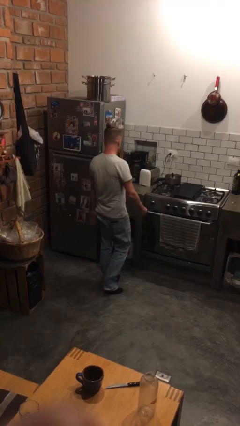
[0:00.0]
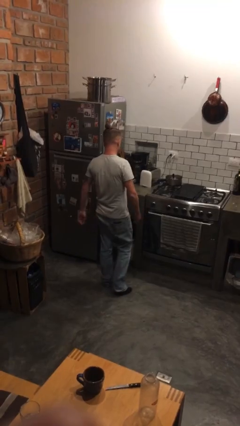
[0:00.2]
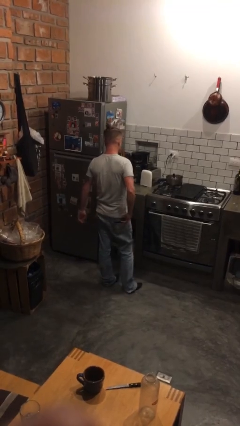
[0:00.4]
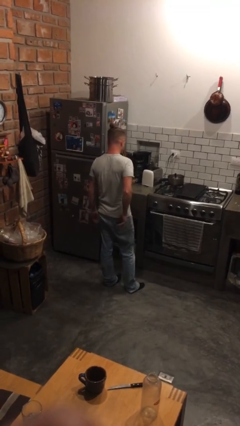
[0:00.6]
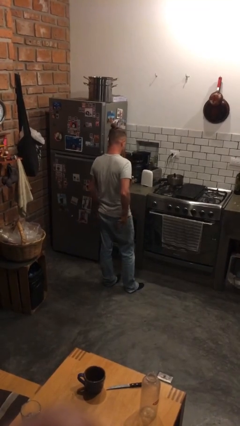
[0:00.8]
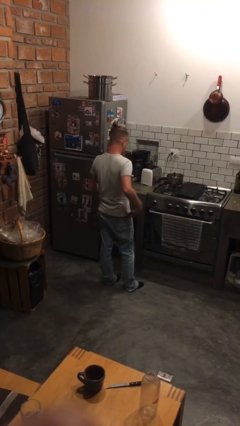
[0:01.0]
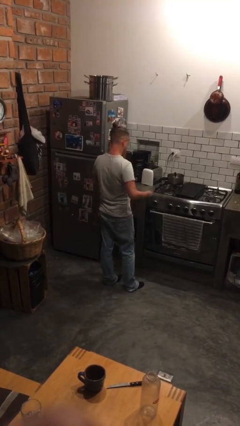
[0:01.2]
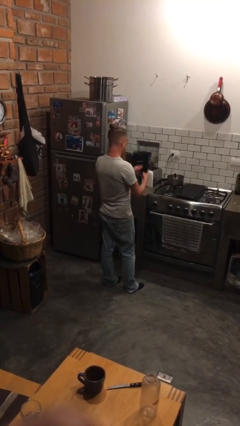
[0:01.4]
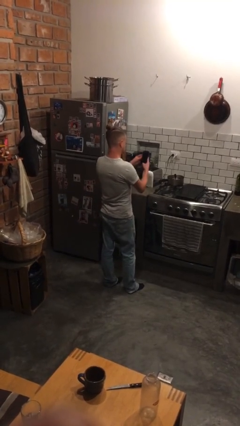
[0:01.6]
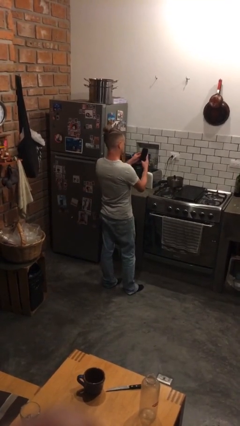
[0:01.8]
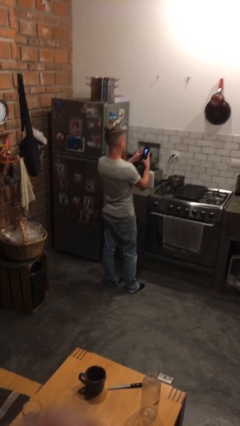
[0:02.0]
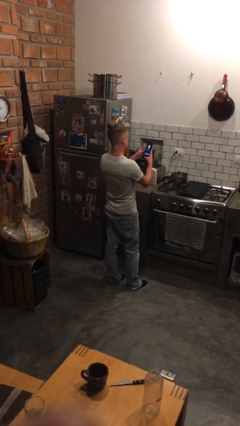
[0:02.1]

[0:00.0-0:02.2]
person takes phone from pocket

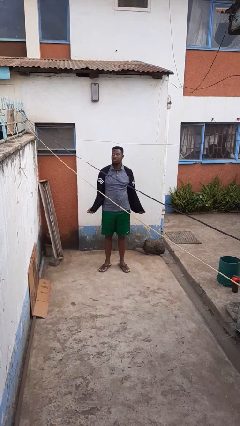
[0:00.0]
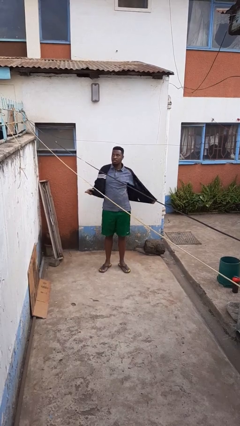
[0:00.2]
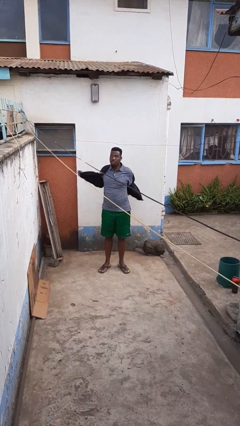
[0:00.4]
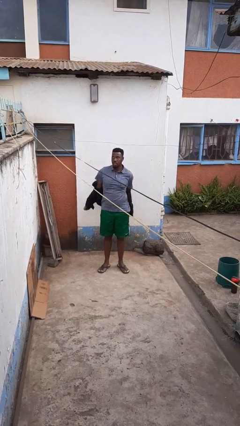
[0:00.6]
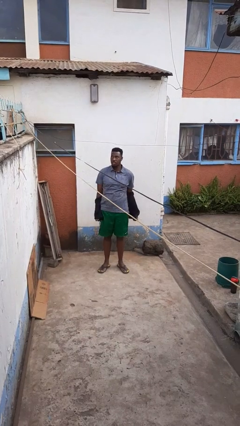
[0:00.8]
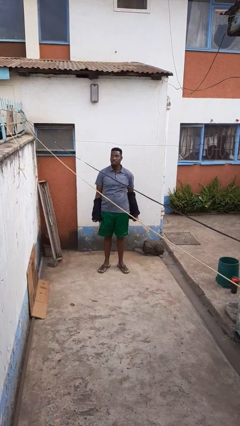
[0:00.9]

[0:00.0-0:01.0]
person takes off jacket

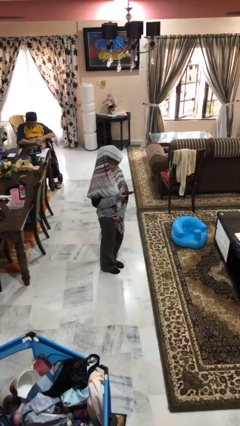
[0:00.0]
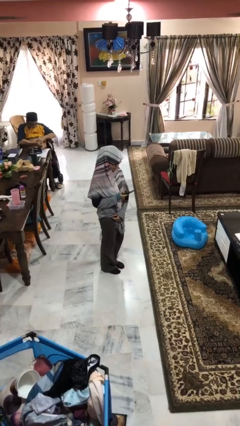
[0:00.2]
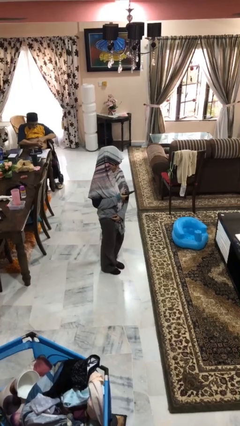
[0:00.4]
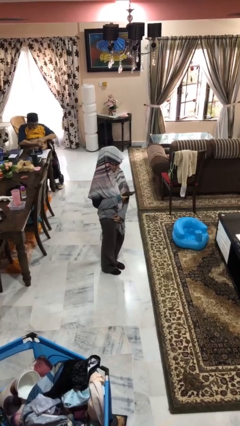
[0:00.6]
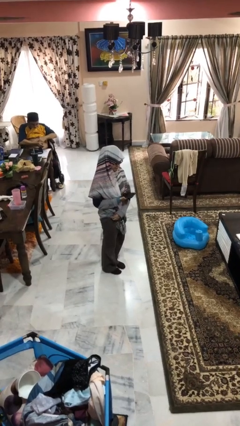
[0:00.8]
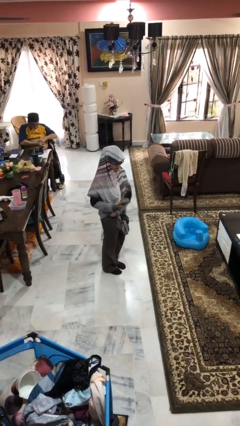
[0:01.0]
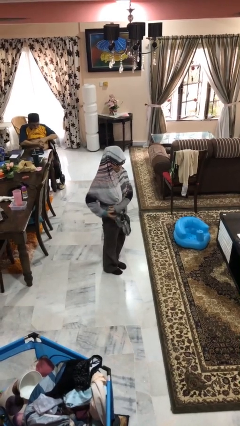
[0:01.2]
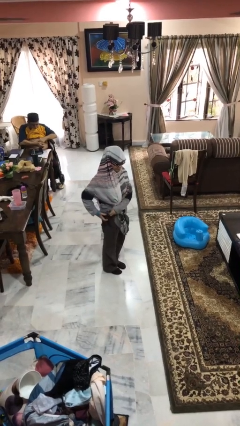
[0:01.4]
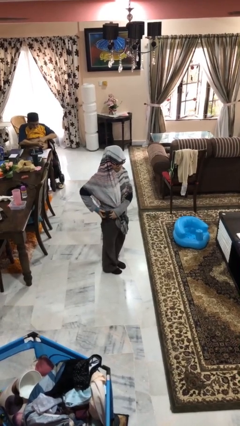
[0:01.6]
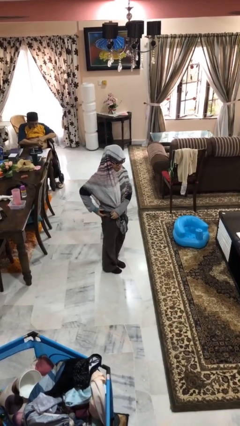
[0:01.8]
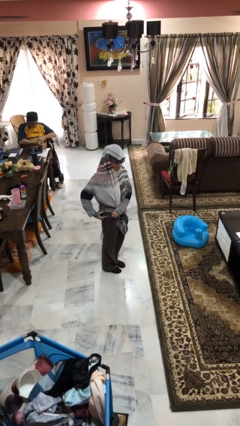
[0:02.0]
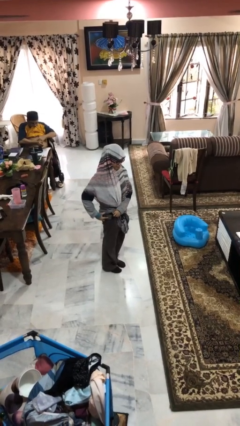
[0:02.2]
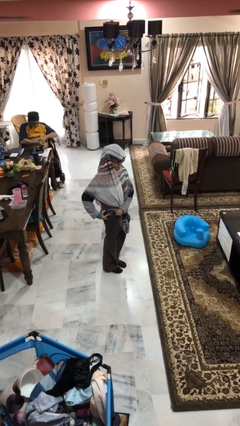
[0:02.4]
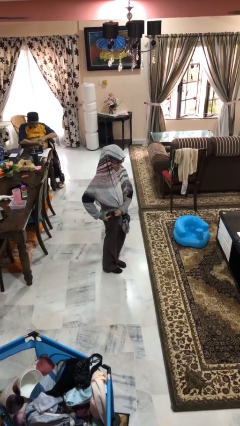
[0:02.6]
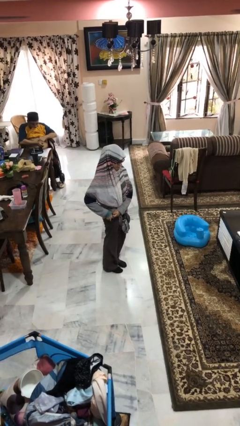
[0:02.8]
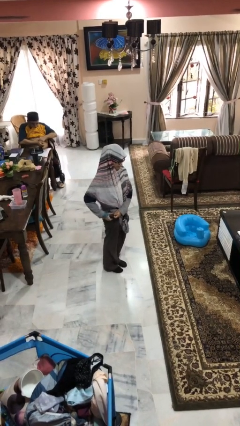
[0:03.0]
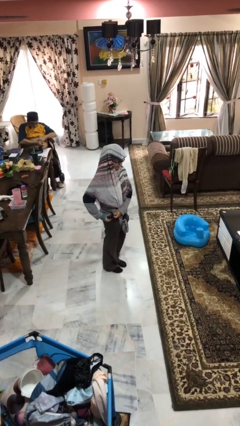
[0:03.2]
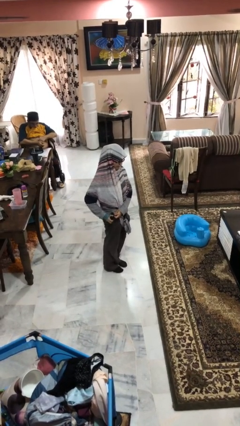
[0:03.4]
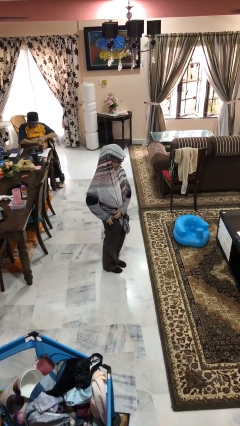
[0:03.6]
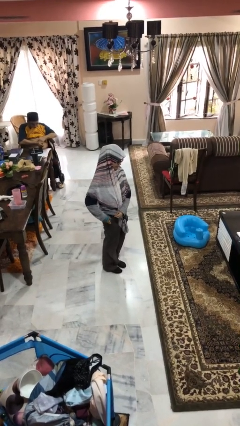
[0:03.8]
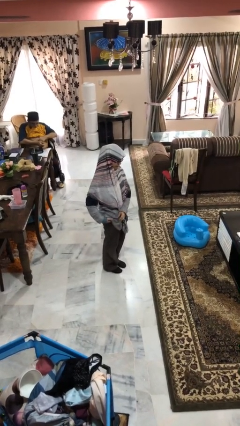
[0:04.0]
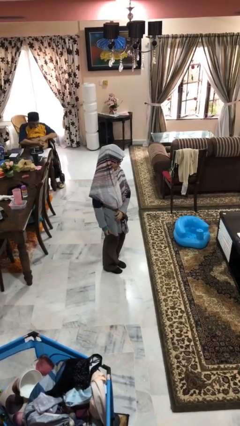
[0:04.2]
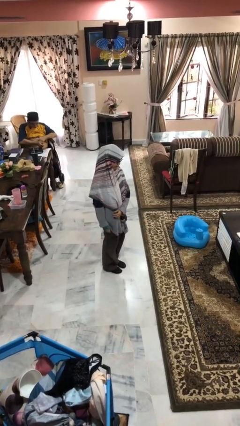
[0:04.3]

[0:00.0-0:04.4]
person puts phone into pocket

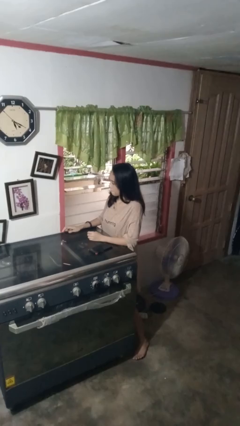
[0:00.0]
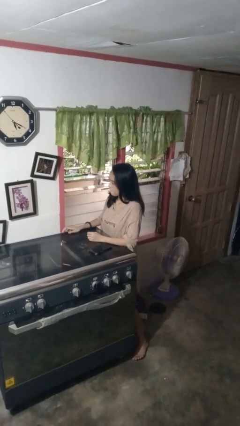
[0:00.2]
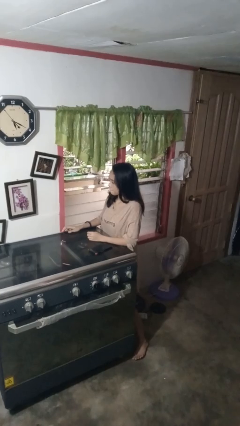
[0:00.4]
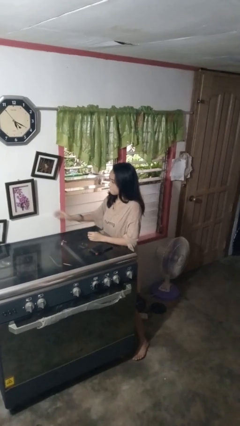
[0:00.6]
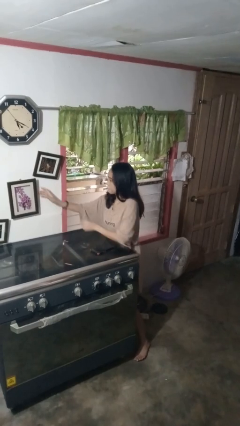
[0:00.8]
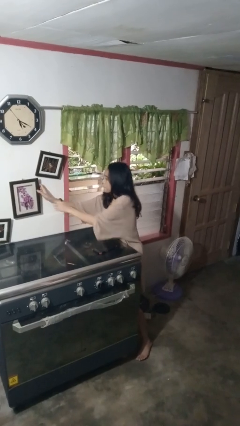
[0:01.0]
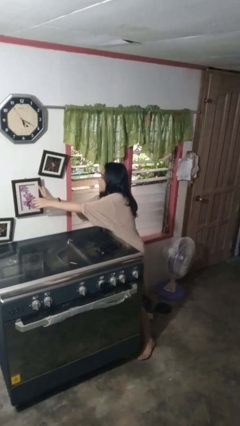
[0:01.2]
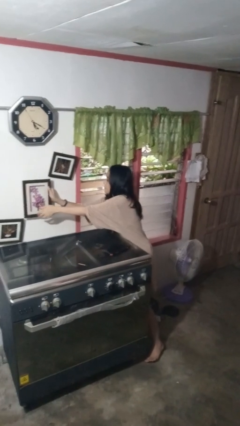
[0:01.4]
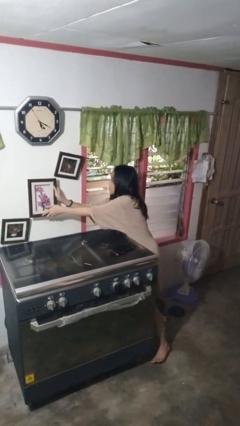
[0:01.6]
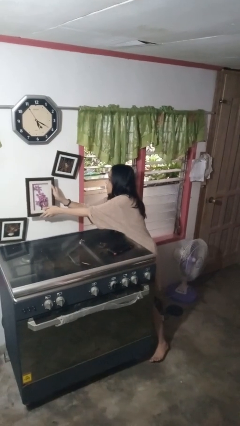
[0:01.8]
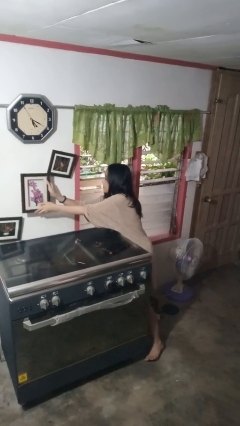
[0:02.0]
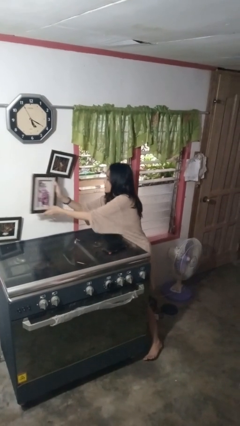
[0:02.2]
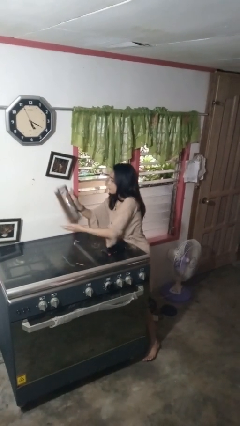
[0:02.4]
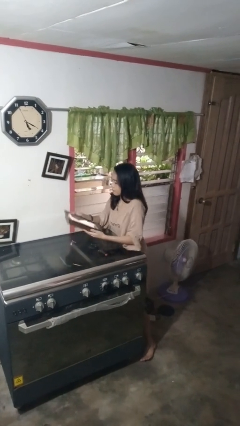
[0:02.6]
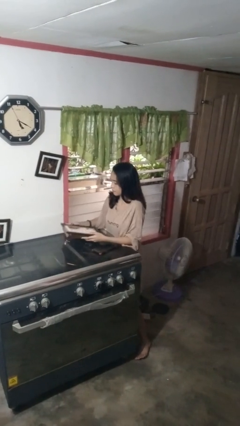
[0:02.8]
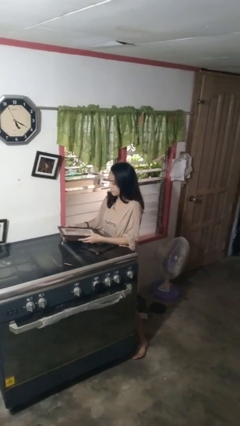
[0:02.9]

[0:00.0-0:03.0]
person takes down picture frame

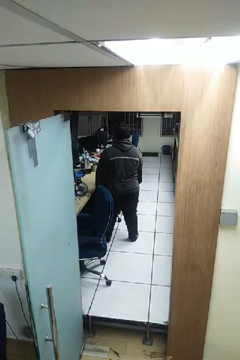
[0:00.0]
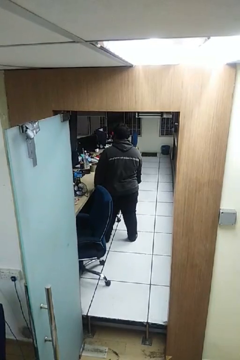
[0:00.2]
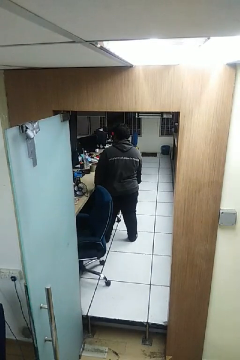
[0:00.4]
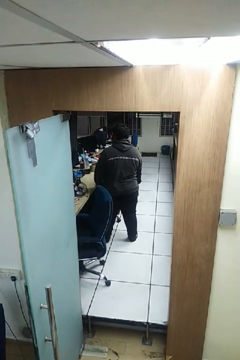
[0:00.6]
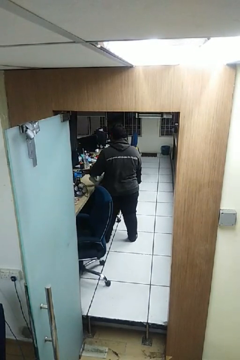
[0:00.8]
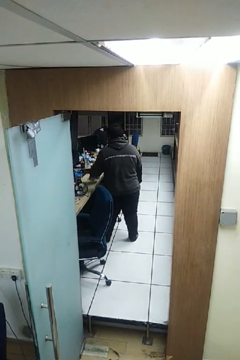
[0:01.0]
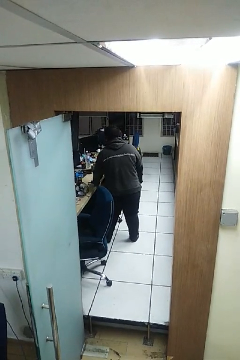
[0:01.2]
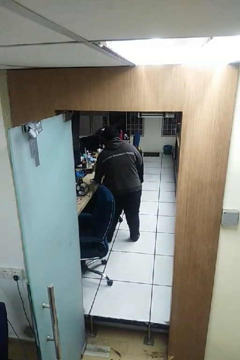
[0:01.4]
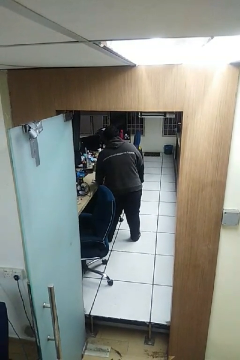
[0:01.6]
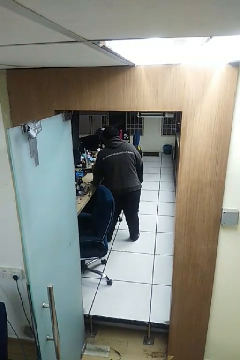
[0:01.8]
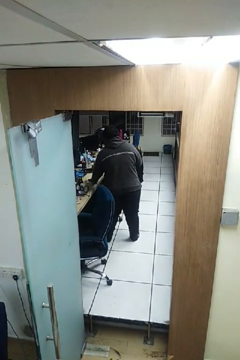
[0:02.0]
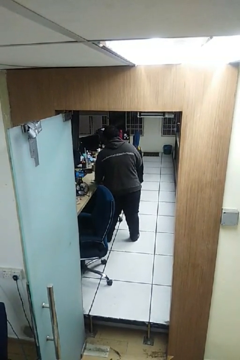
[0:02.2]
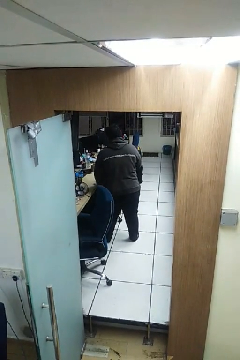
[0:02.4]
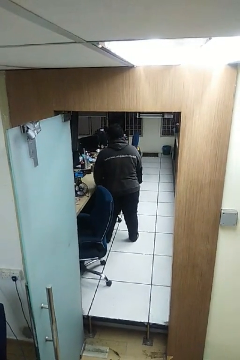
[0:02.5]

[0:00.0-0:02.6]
person cleans table with rag

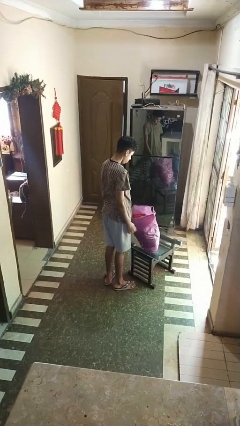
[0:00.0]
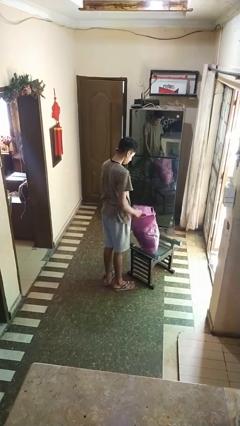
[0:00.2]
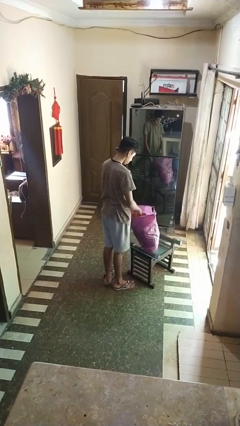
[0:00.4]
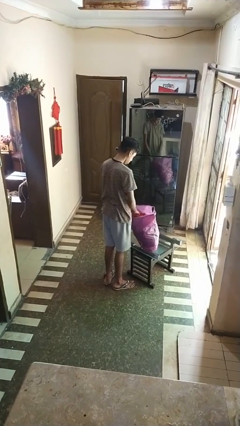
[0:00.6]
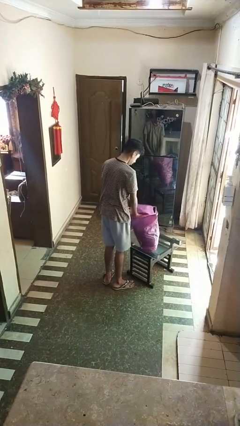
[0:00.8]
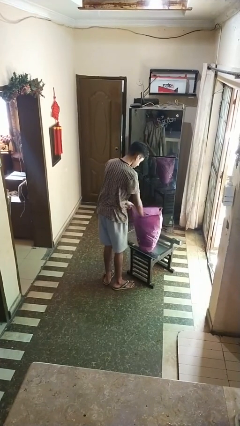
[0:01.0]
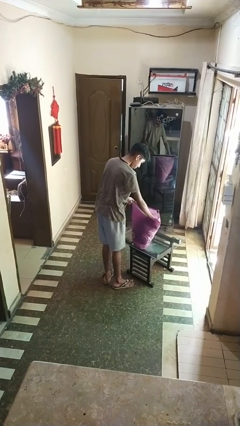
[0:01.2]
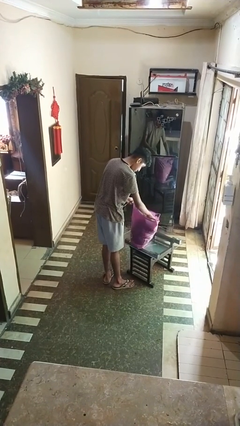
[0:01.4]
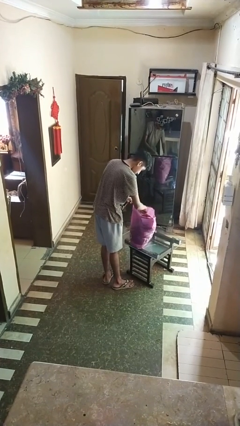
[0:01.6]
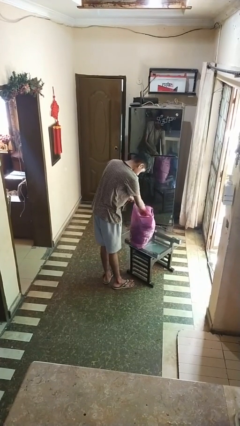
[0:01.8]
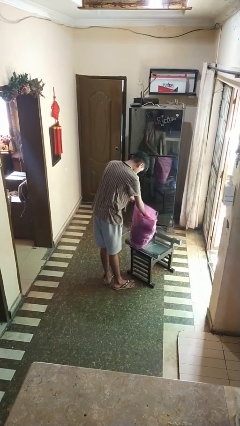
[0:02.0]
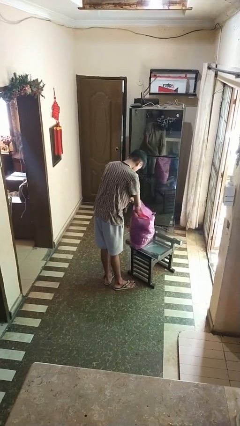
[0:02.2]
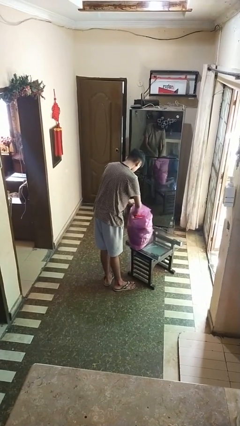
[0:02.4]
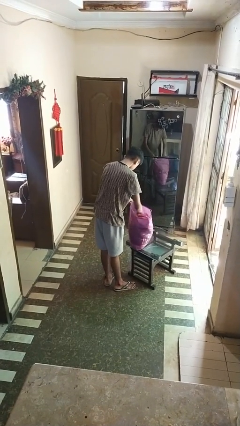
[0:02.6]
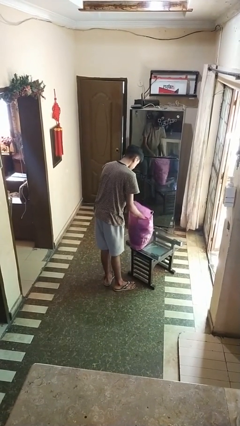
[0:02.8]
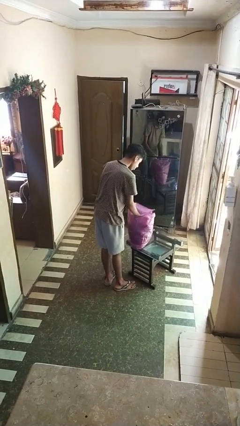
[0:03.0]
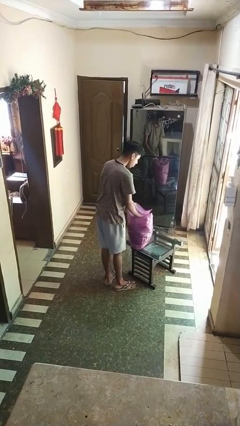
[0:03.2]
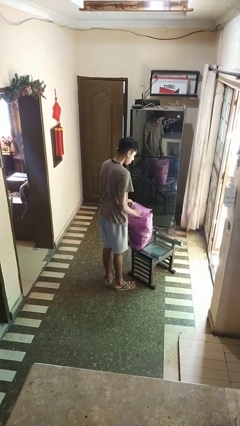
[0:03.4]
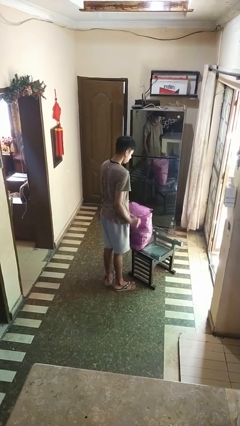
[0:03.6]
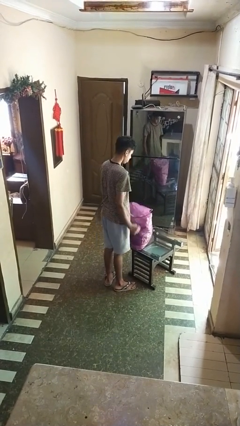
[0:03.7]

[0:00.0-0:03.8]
person searches in bag

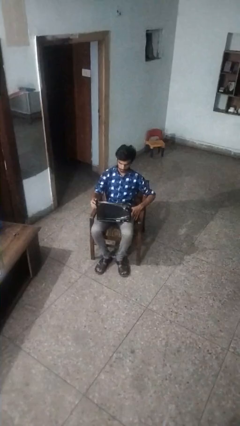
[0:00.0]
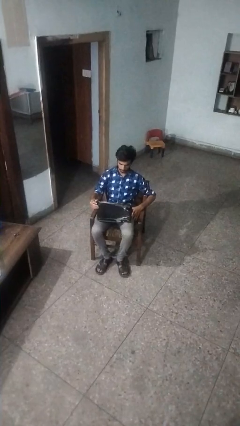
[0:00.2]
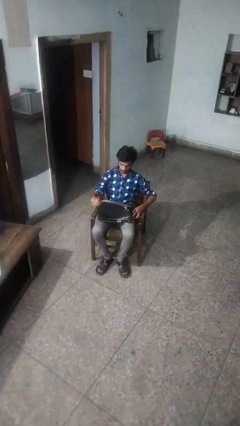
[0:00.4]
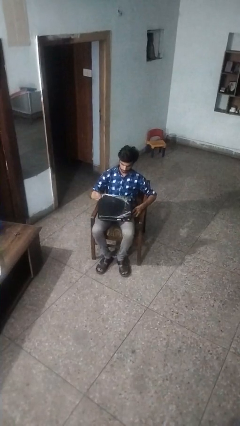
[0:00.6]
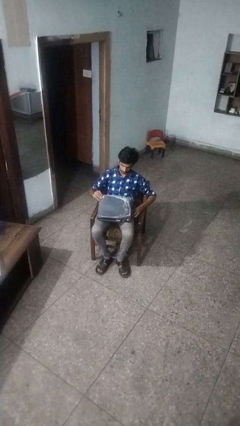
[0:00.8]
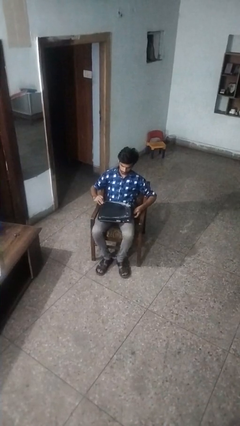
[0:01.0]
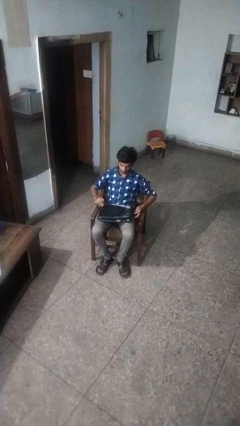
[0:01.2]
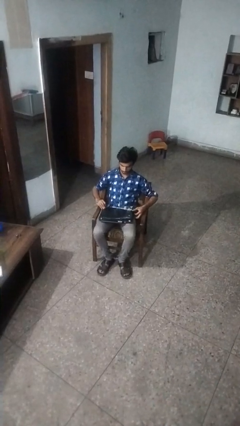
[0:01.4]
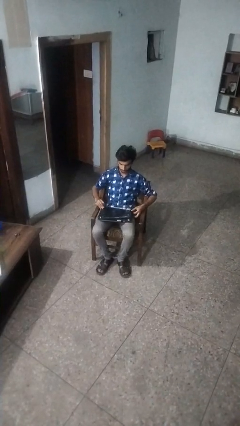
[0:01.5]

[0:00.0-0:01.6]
person closes laptop
